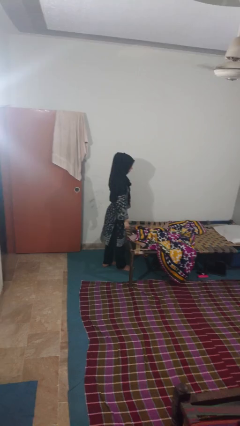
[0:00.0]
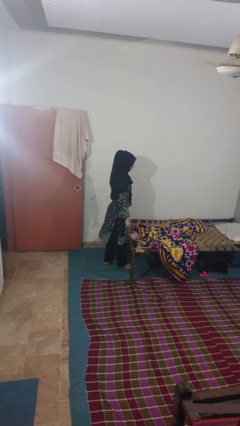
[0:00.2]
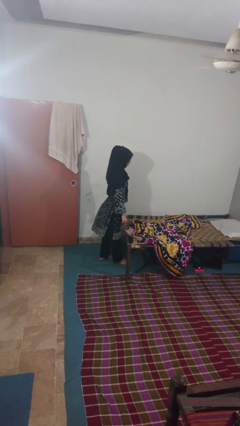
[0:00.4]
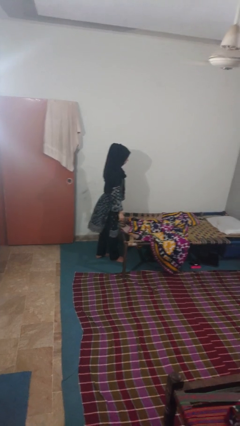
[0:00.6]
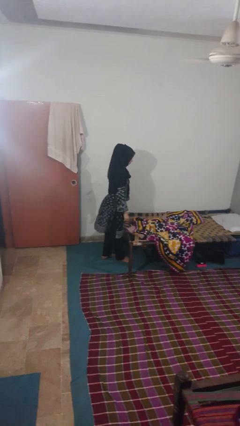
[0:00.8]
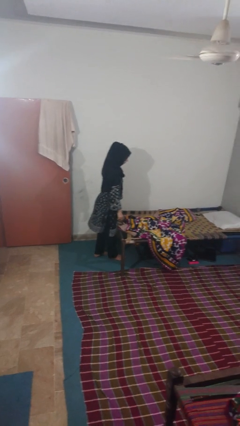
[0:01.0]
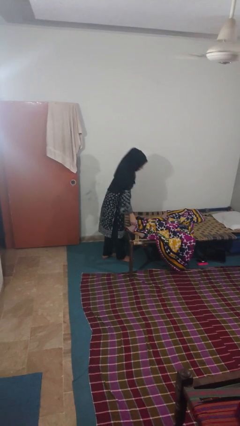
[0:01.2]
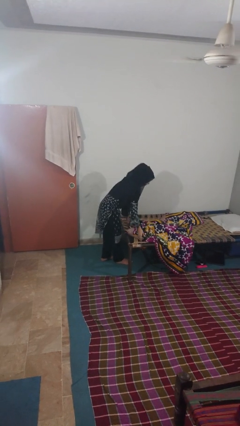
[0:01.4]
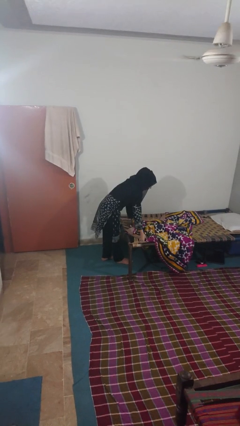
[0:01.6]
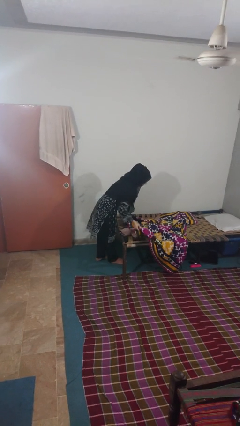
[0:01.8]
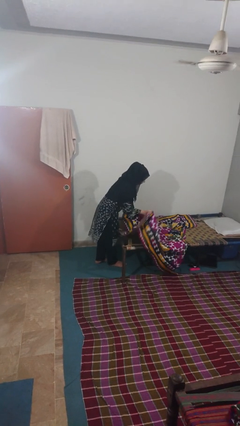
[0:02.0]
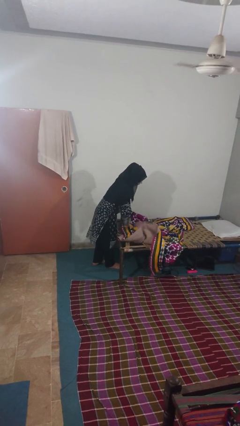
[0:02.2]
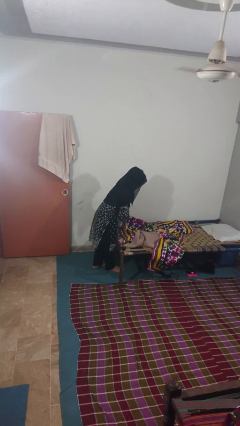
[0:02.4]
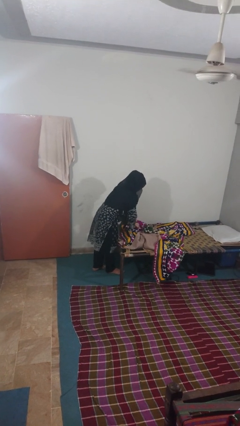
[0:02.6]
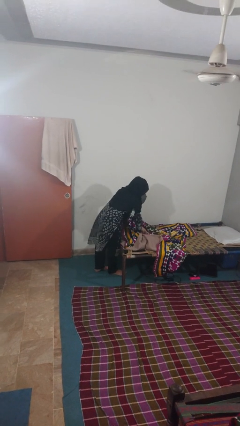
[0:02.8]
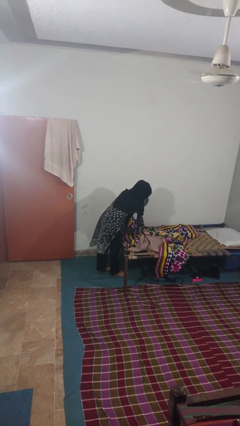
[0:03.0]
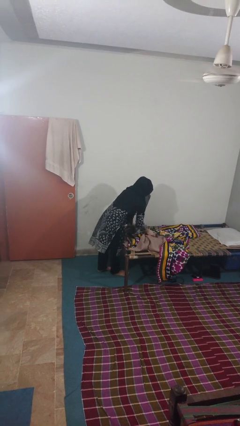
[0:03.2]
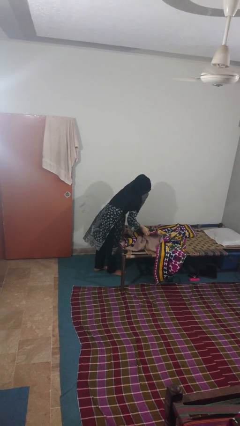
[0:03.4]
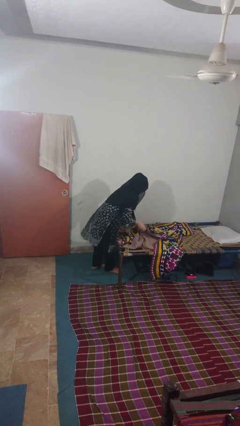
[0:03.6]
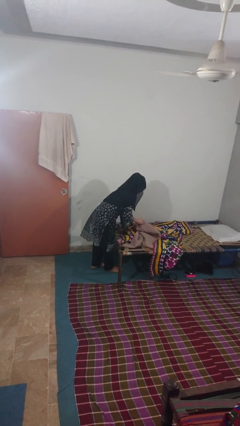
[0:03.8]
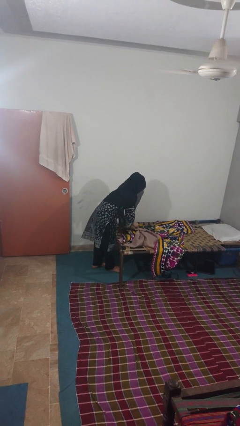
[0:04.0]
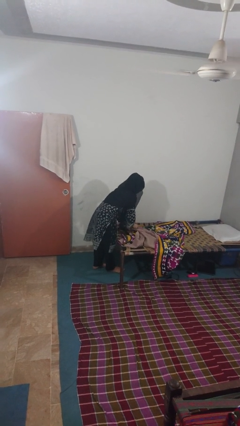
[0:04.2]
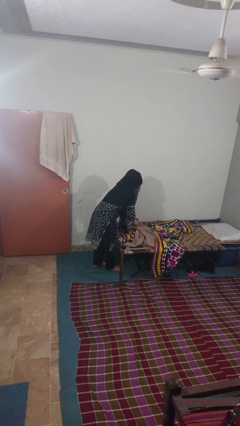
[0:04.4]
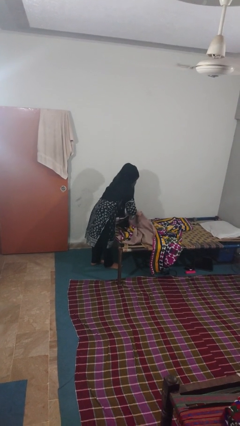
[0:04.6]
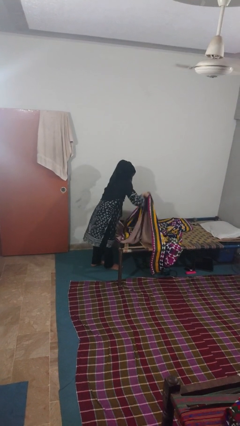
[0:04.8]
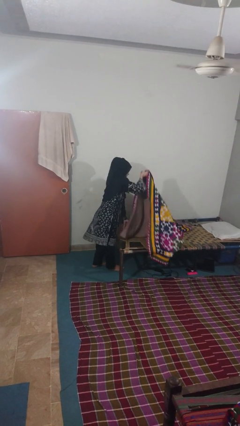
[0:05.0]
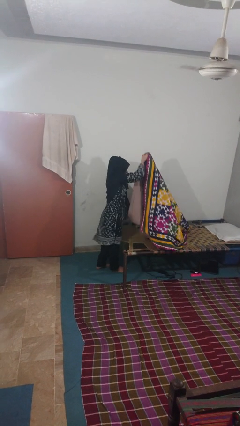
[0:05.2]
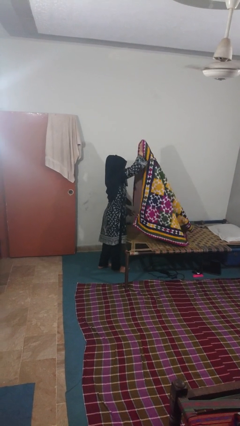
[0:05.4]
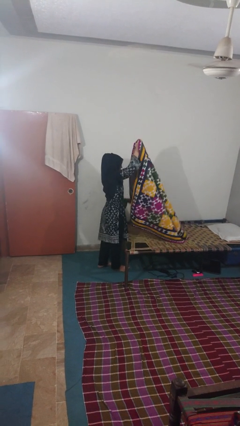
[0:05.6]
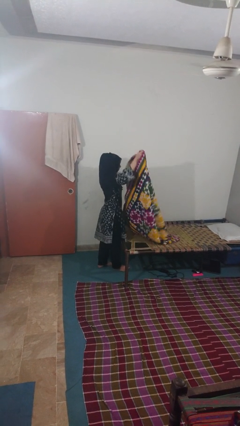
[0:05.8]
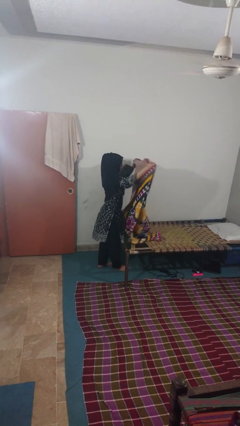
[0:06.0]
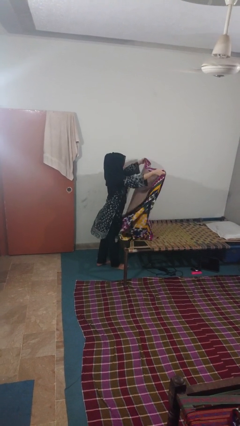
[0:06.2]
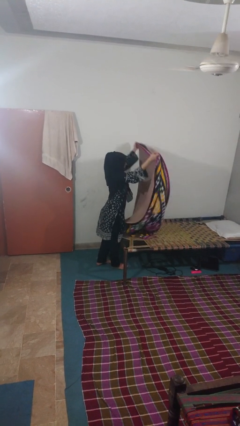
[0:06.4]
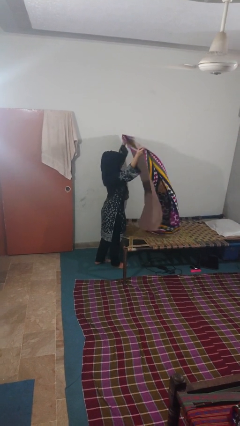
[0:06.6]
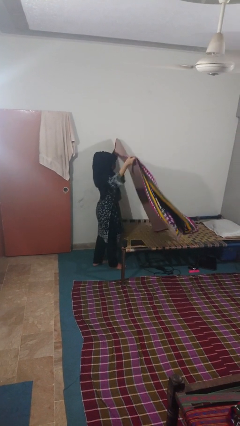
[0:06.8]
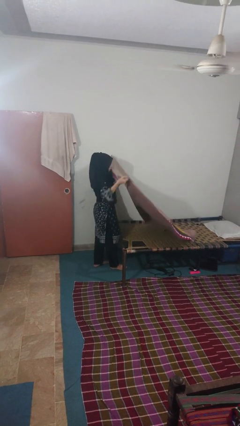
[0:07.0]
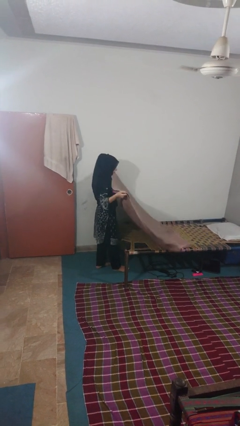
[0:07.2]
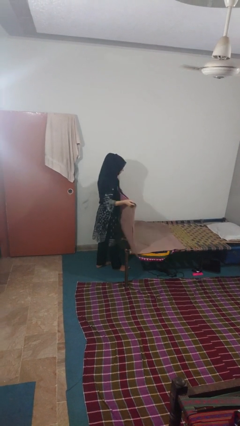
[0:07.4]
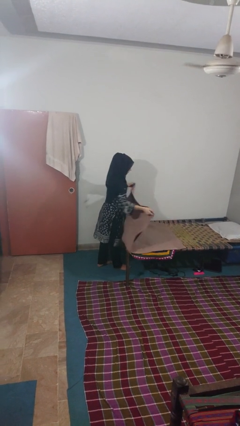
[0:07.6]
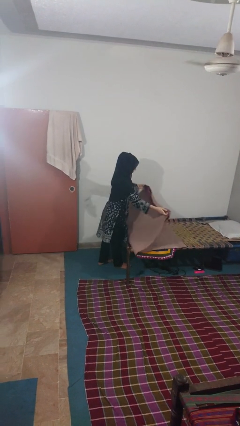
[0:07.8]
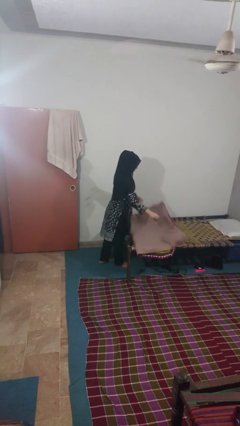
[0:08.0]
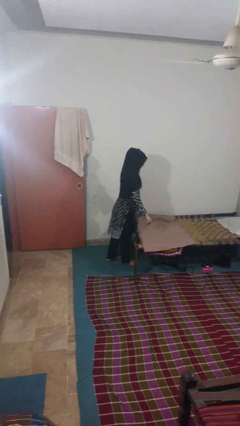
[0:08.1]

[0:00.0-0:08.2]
person folds blanket

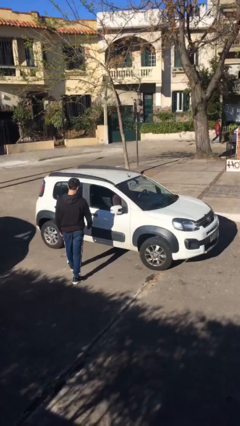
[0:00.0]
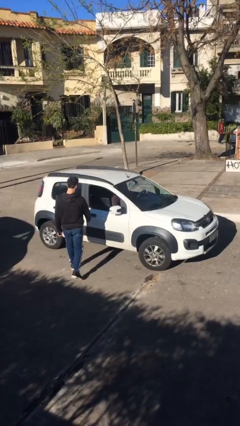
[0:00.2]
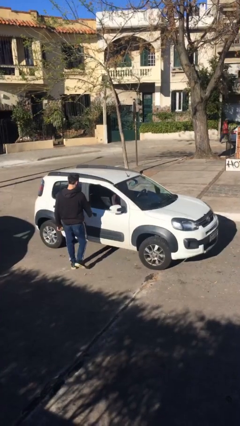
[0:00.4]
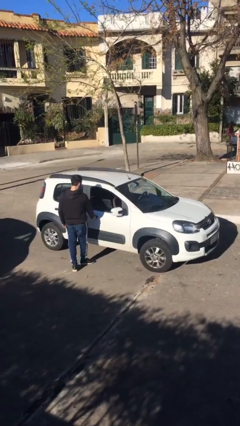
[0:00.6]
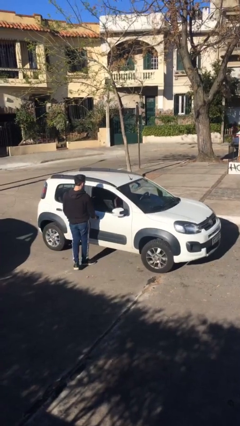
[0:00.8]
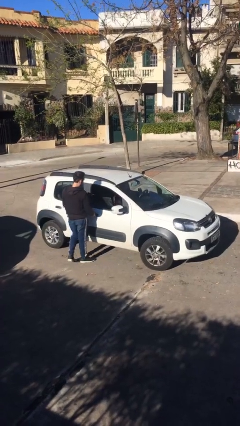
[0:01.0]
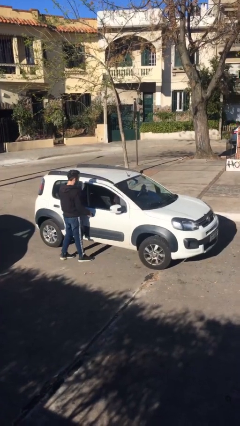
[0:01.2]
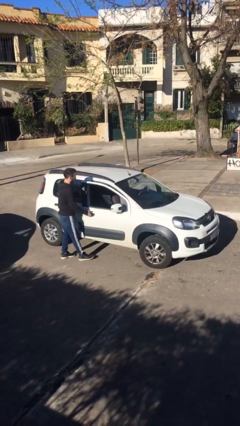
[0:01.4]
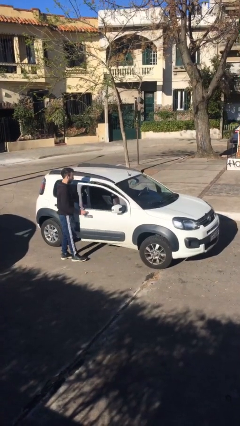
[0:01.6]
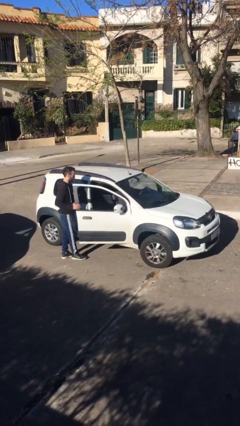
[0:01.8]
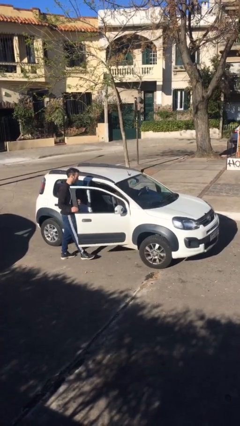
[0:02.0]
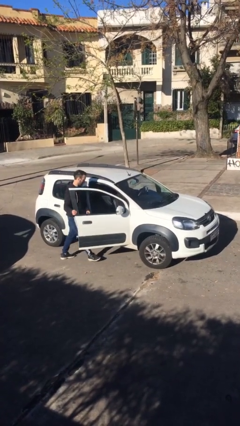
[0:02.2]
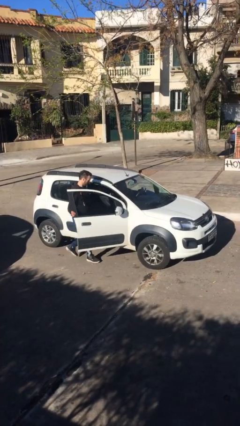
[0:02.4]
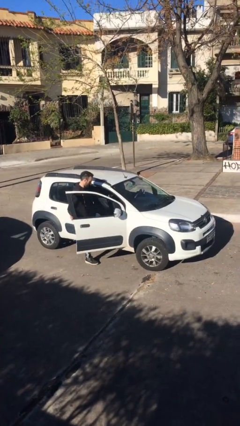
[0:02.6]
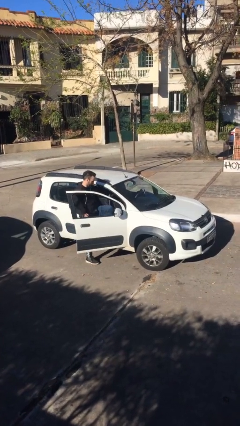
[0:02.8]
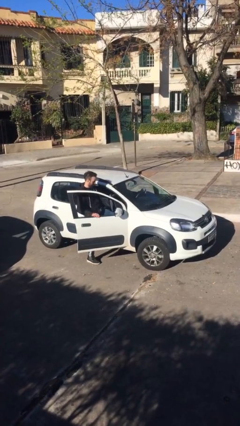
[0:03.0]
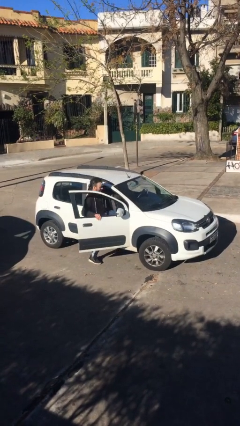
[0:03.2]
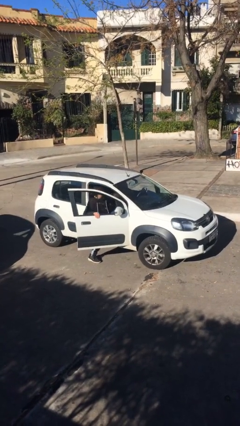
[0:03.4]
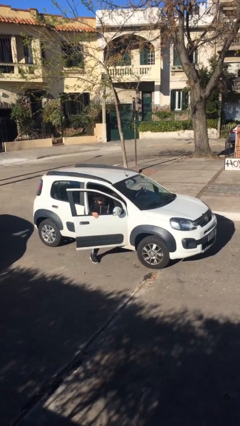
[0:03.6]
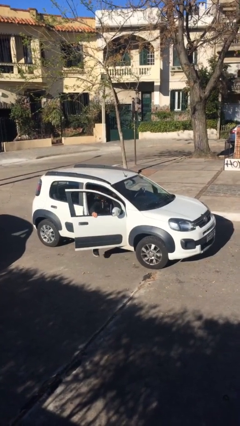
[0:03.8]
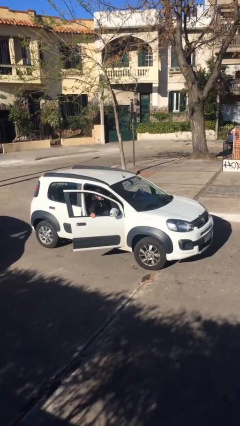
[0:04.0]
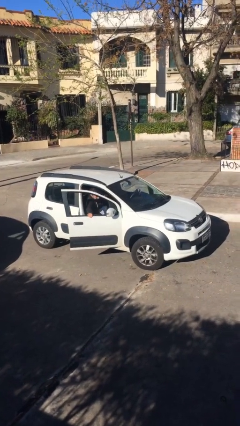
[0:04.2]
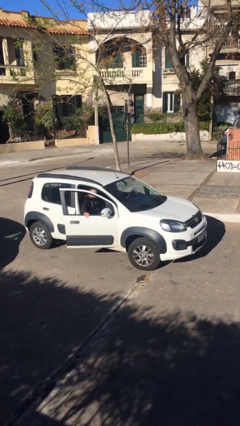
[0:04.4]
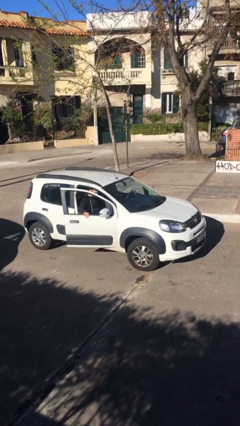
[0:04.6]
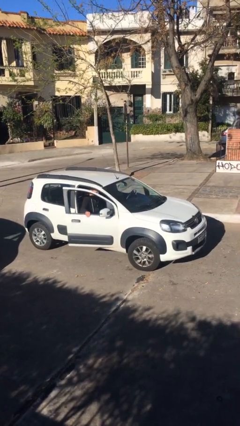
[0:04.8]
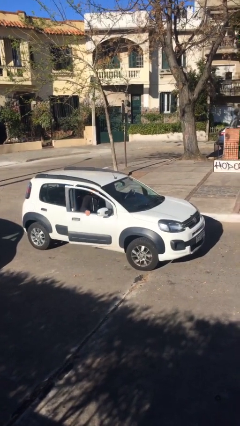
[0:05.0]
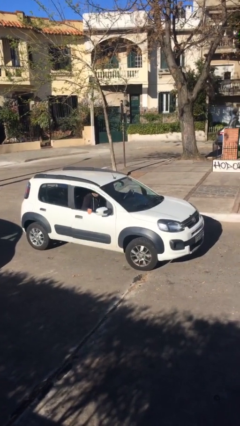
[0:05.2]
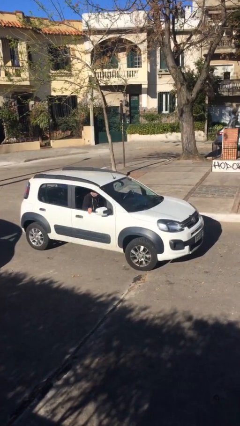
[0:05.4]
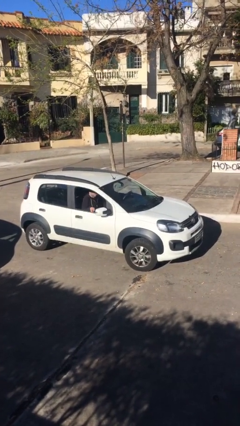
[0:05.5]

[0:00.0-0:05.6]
car picks up person

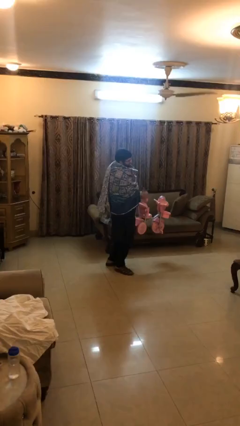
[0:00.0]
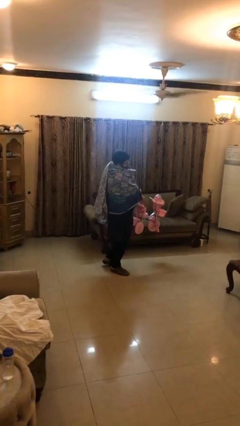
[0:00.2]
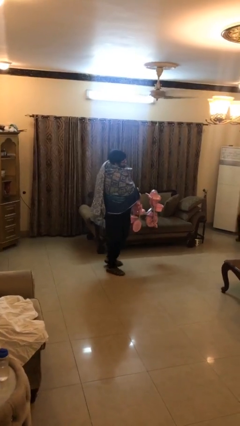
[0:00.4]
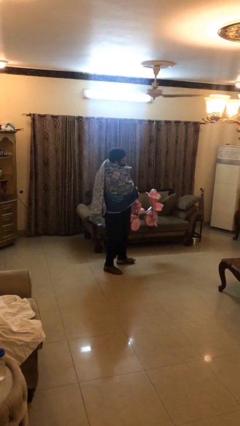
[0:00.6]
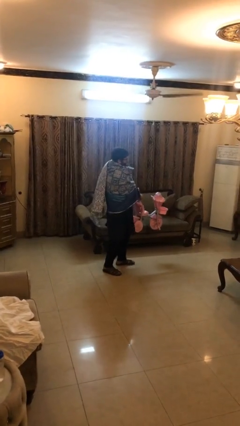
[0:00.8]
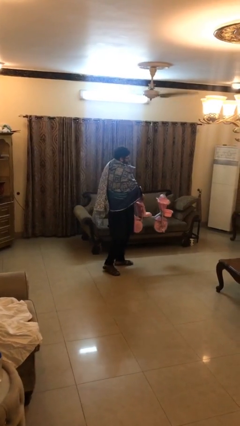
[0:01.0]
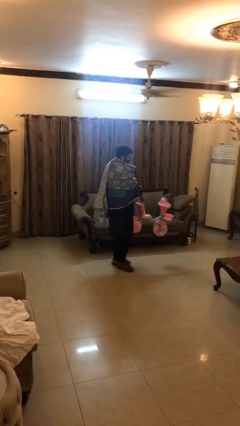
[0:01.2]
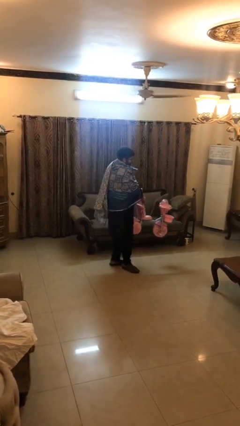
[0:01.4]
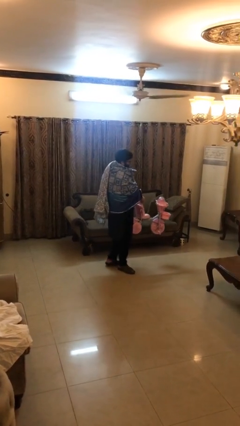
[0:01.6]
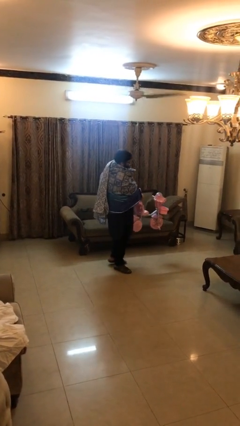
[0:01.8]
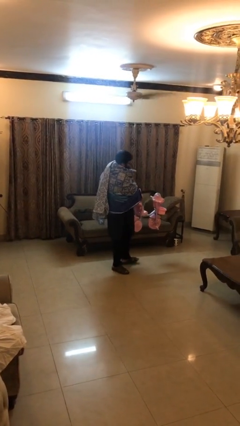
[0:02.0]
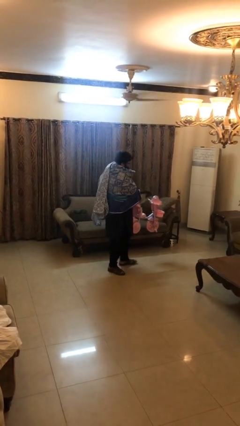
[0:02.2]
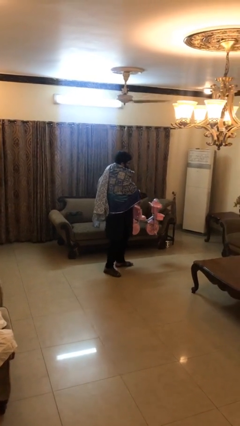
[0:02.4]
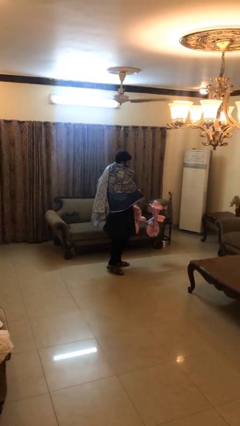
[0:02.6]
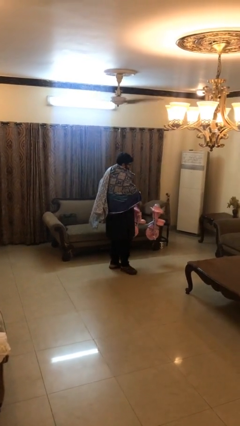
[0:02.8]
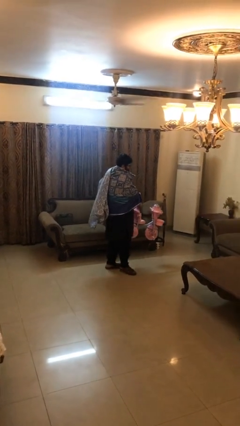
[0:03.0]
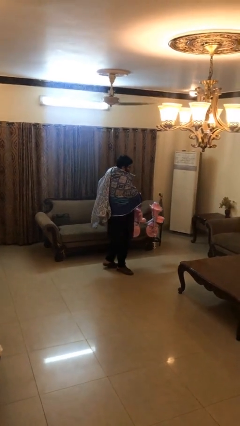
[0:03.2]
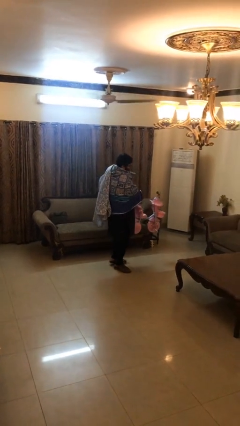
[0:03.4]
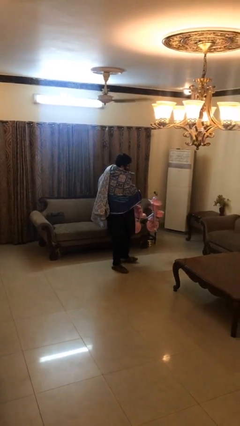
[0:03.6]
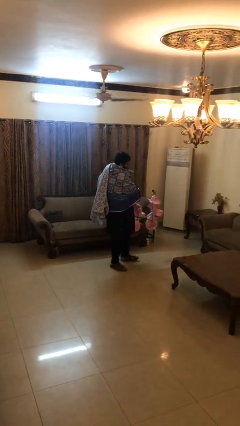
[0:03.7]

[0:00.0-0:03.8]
person carries heavy object

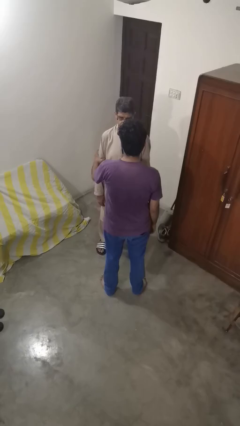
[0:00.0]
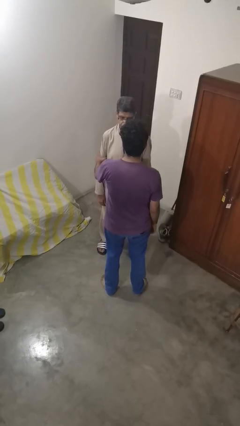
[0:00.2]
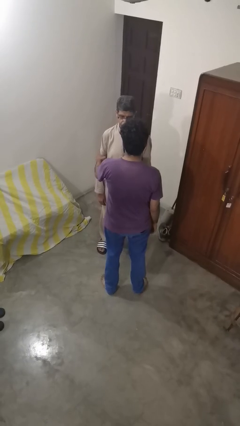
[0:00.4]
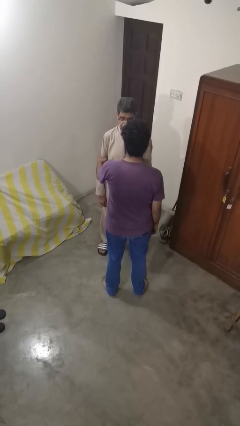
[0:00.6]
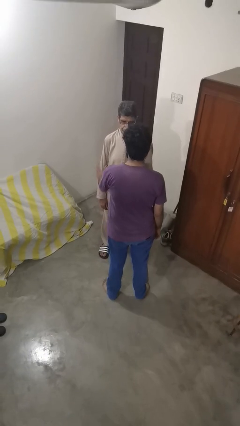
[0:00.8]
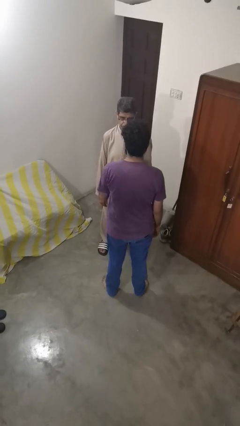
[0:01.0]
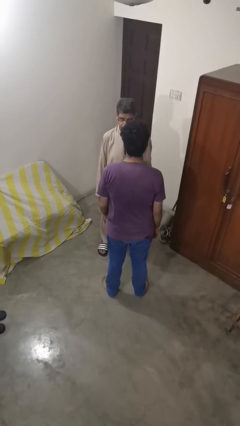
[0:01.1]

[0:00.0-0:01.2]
person grabs person by bicep
